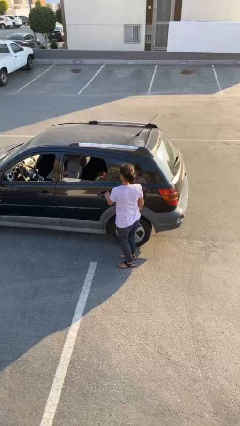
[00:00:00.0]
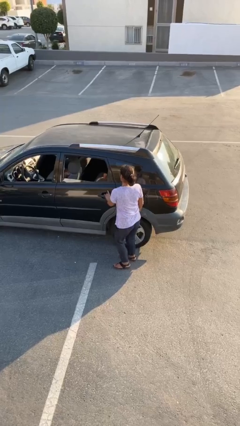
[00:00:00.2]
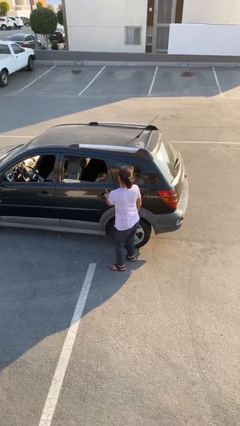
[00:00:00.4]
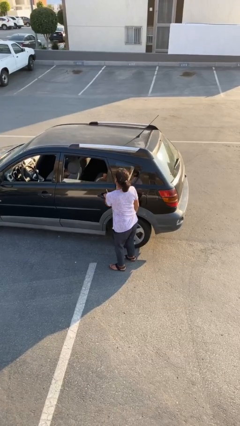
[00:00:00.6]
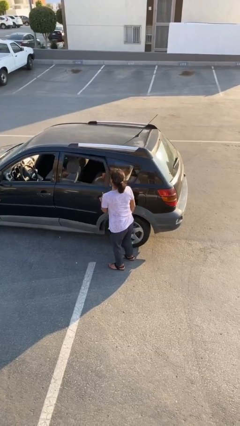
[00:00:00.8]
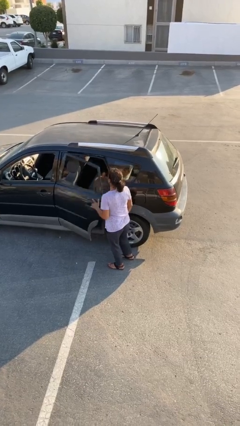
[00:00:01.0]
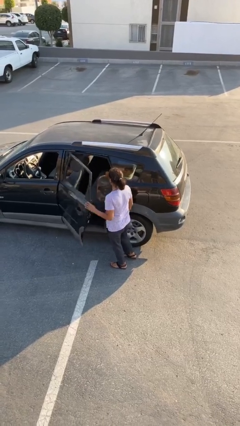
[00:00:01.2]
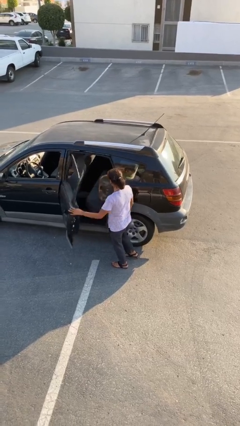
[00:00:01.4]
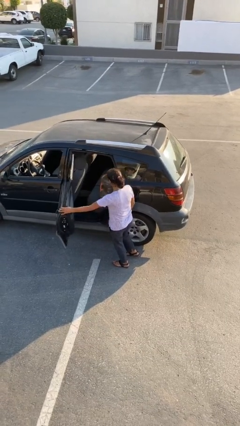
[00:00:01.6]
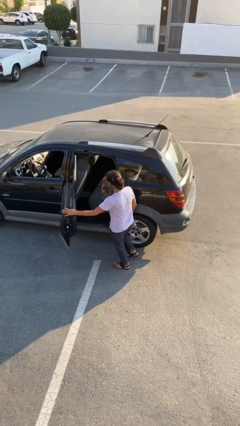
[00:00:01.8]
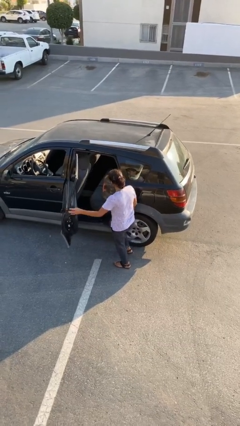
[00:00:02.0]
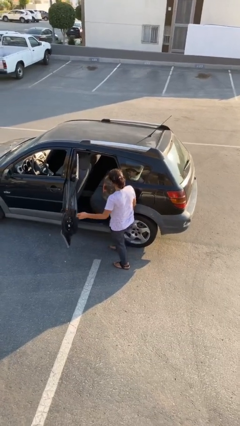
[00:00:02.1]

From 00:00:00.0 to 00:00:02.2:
person opens car door

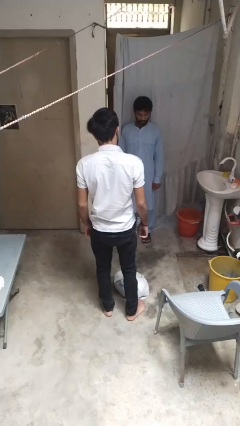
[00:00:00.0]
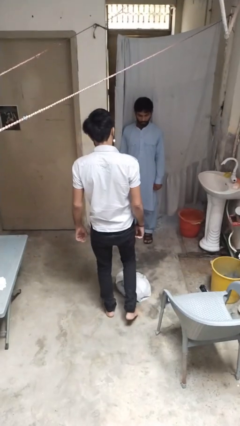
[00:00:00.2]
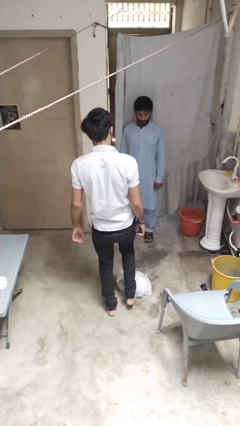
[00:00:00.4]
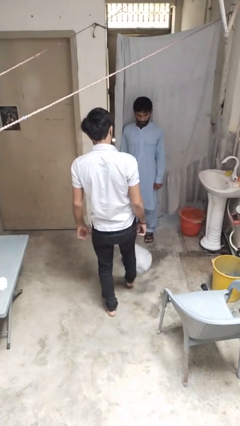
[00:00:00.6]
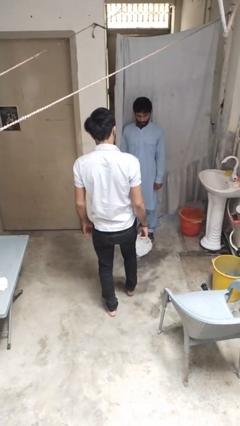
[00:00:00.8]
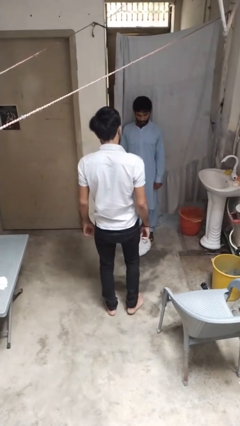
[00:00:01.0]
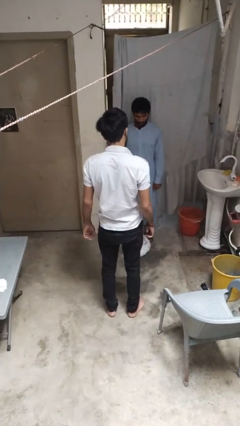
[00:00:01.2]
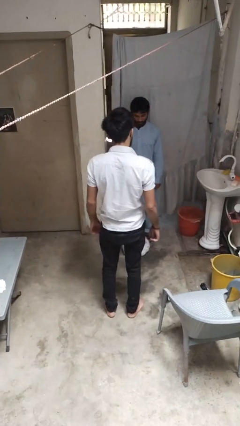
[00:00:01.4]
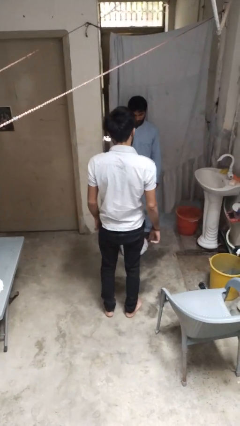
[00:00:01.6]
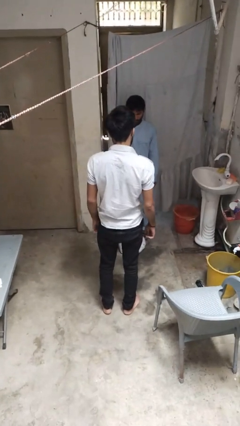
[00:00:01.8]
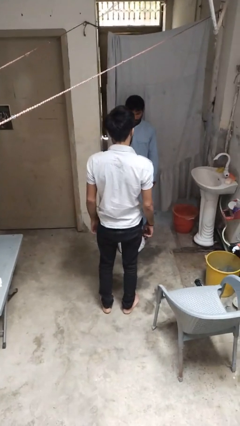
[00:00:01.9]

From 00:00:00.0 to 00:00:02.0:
person kicks object to person

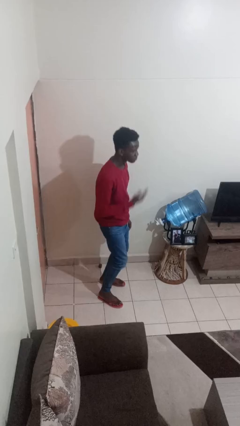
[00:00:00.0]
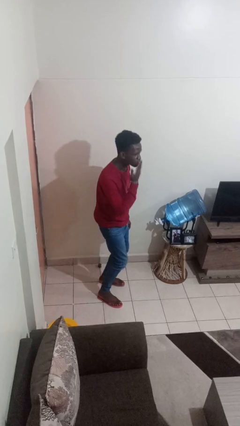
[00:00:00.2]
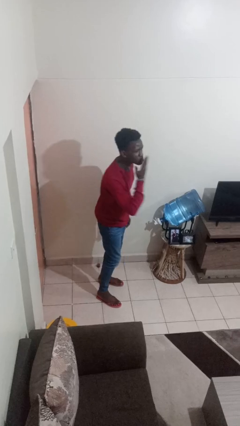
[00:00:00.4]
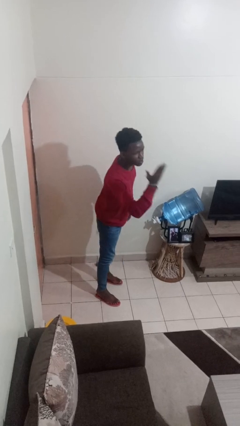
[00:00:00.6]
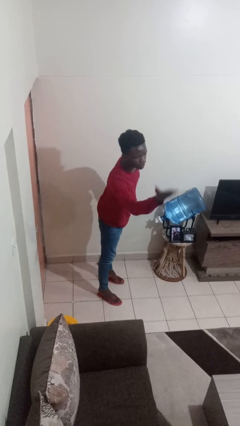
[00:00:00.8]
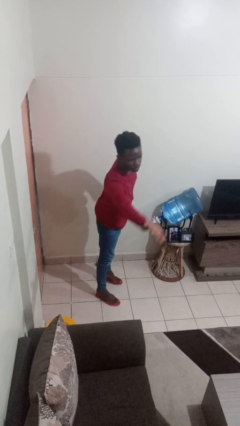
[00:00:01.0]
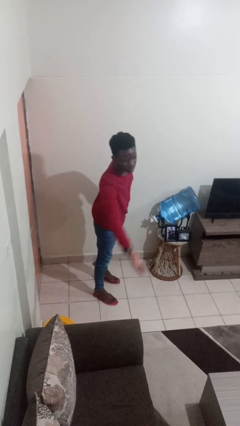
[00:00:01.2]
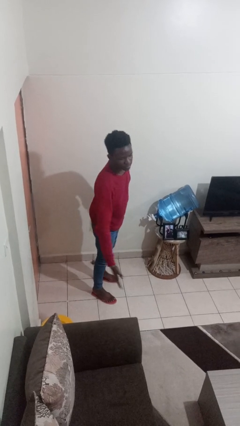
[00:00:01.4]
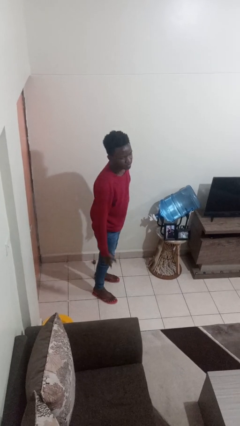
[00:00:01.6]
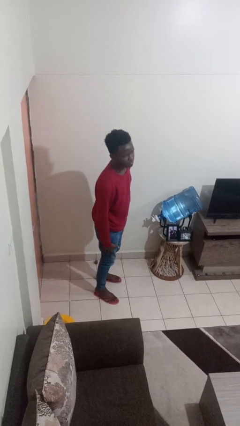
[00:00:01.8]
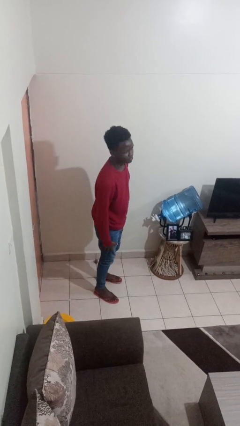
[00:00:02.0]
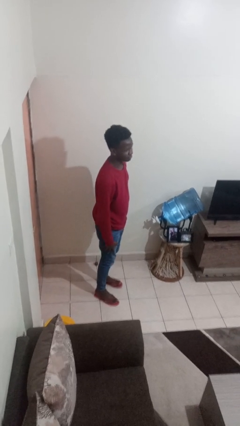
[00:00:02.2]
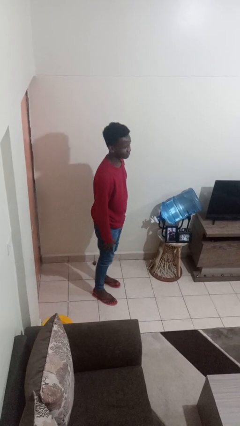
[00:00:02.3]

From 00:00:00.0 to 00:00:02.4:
person gestures blow kiss

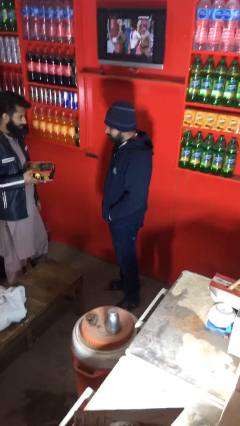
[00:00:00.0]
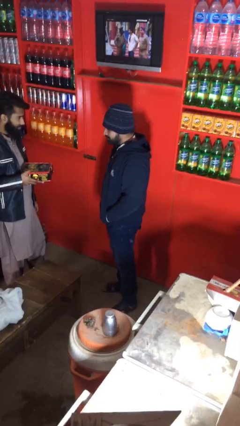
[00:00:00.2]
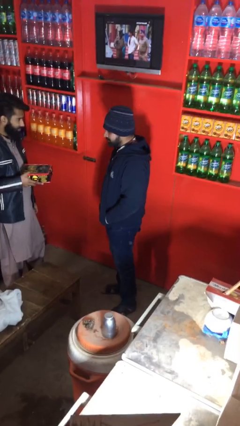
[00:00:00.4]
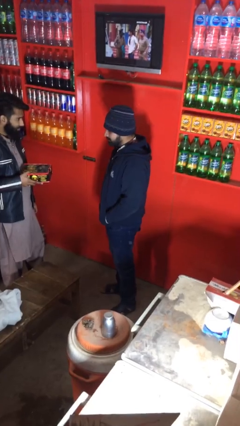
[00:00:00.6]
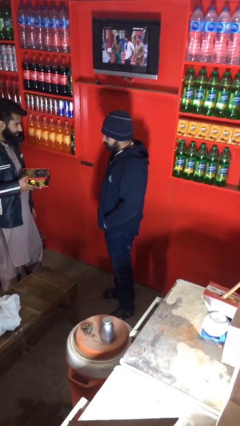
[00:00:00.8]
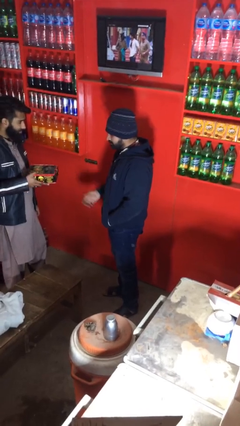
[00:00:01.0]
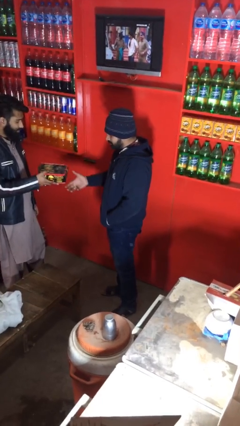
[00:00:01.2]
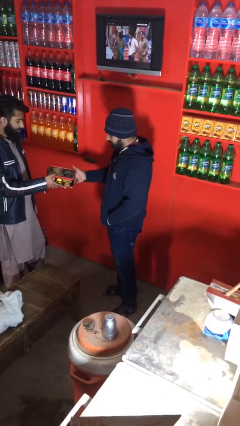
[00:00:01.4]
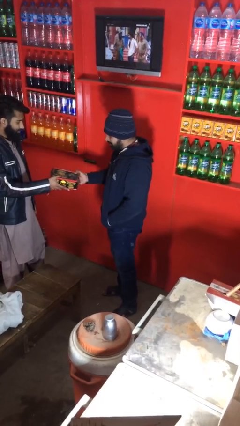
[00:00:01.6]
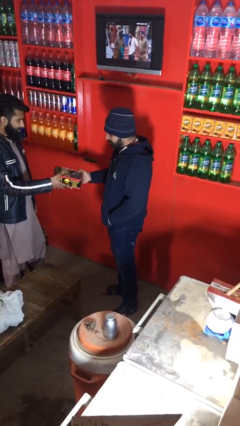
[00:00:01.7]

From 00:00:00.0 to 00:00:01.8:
person transfers object to person

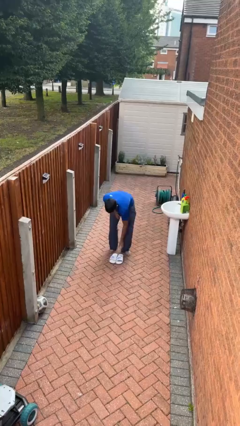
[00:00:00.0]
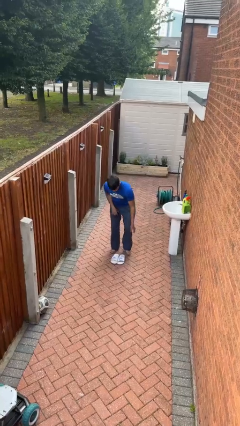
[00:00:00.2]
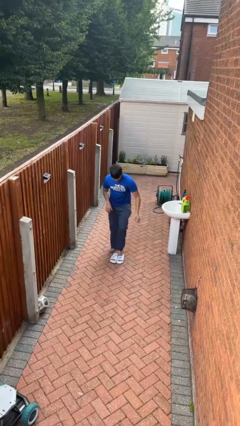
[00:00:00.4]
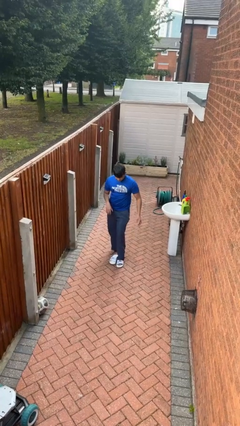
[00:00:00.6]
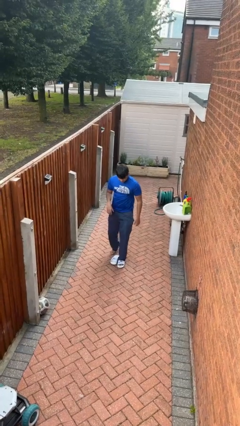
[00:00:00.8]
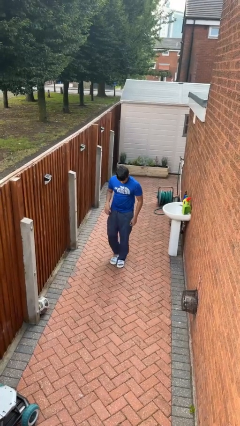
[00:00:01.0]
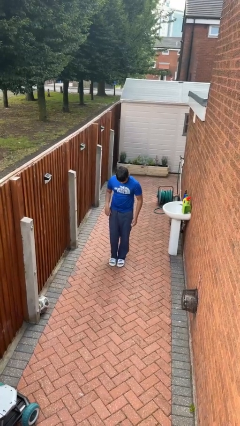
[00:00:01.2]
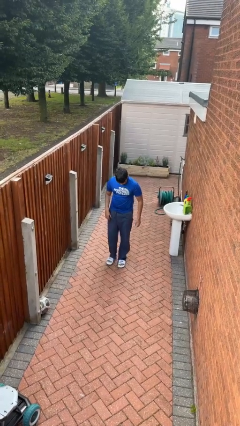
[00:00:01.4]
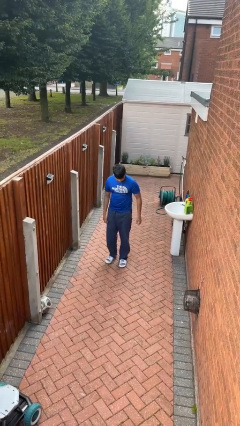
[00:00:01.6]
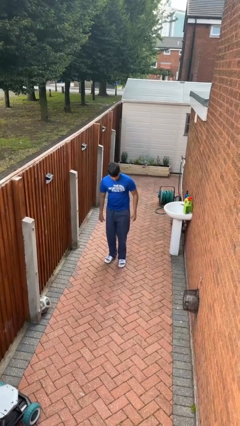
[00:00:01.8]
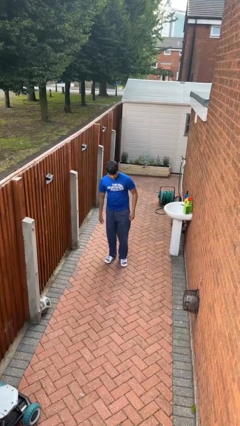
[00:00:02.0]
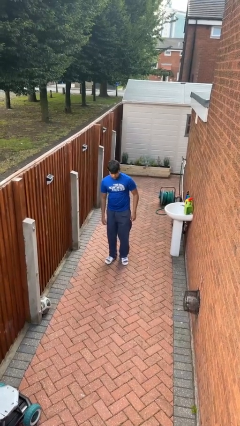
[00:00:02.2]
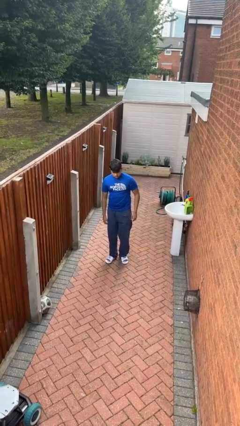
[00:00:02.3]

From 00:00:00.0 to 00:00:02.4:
person puts on shoes

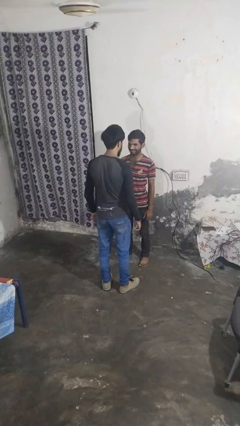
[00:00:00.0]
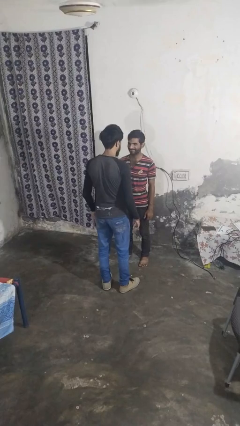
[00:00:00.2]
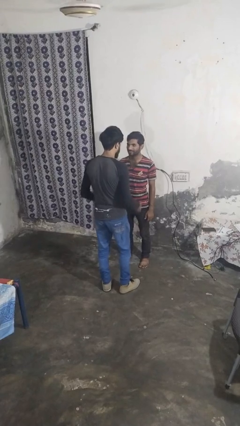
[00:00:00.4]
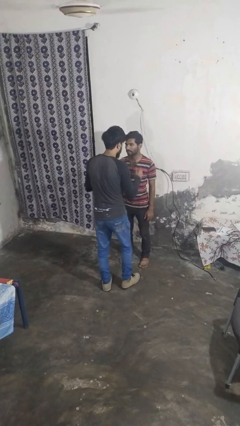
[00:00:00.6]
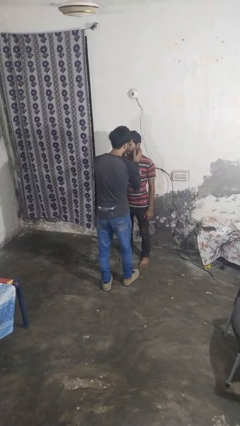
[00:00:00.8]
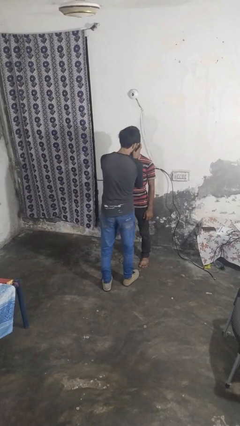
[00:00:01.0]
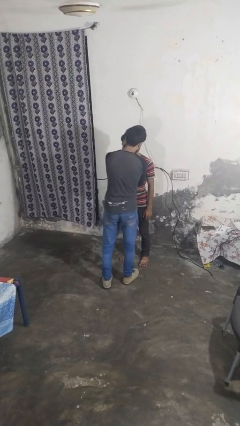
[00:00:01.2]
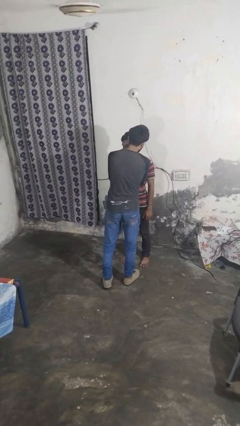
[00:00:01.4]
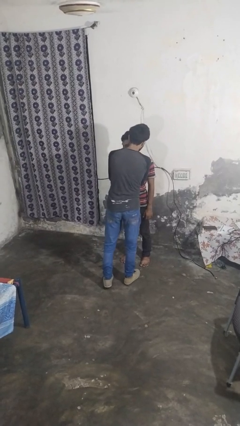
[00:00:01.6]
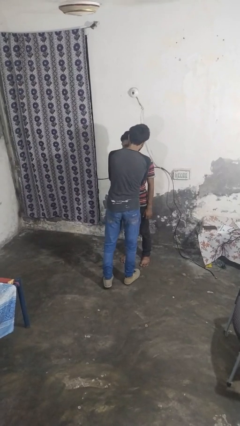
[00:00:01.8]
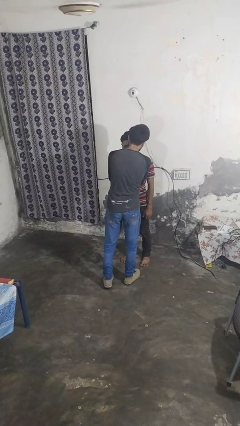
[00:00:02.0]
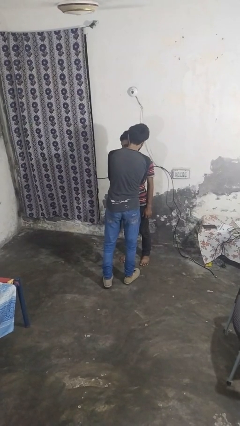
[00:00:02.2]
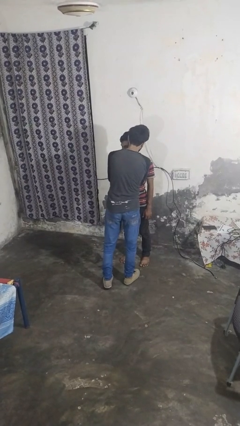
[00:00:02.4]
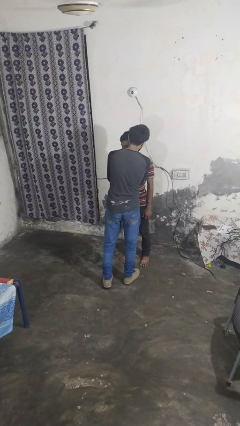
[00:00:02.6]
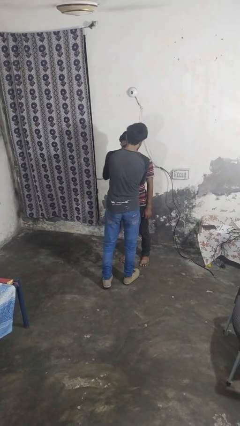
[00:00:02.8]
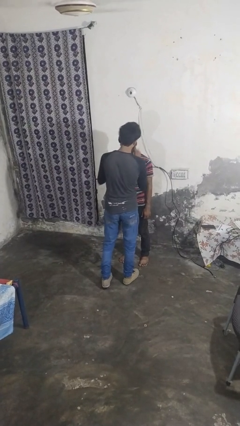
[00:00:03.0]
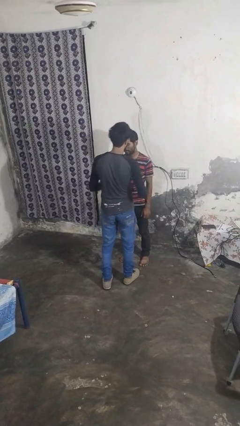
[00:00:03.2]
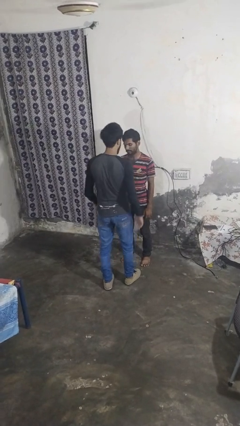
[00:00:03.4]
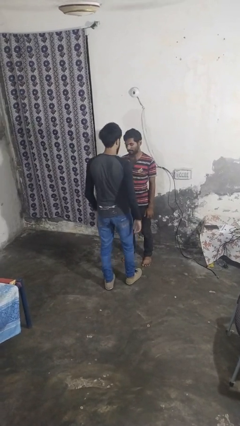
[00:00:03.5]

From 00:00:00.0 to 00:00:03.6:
person kisses cheek of person

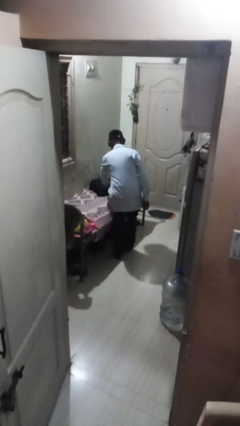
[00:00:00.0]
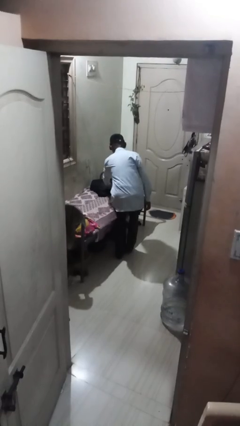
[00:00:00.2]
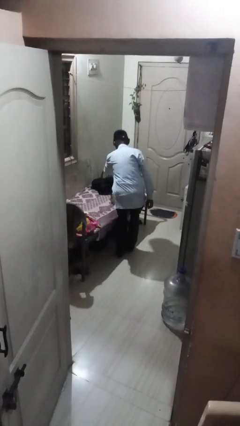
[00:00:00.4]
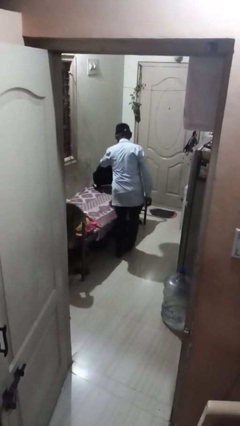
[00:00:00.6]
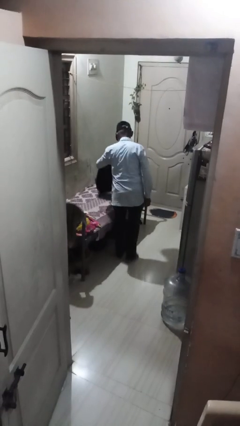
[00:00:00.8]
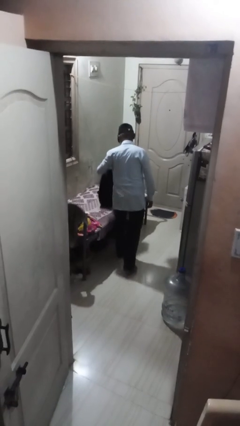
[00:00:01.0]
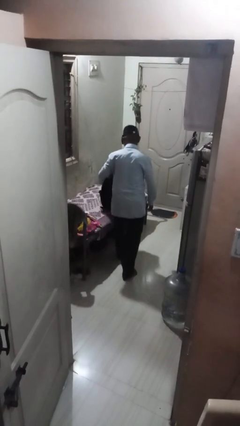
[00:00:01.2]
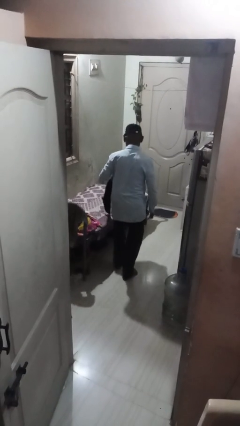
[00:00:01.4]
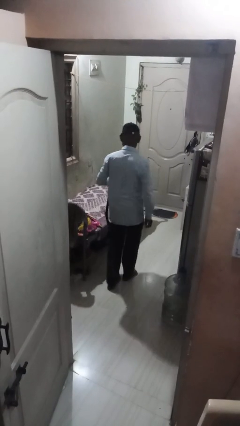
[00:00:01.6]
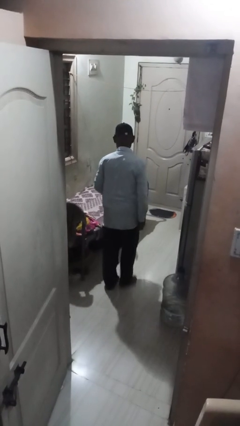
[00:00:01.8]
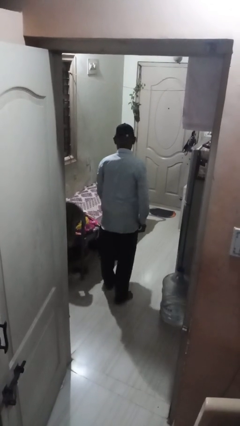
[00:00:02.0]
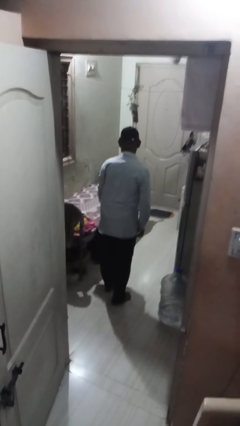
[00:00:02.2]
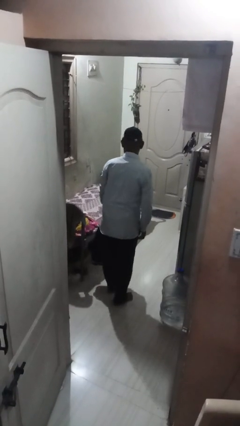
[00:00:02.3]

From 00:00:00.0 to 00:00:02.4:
person picks up object from bed
